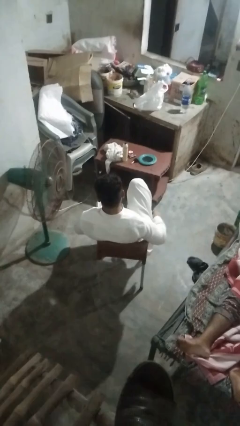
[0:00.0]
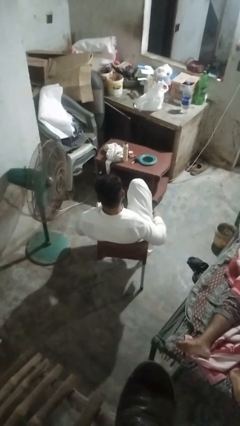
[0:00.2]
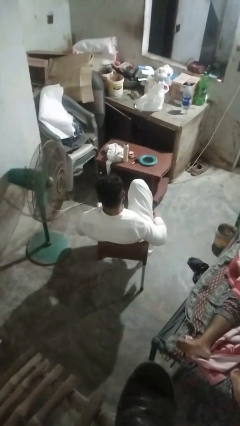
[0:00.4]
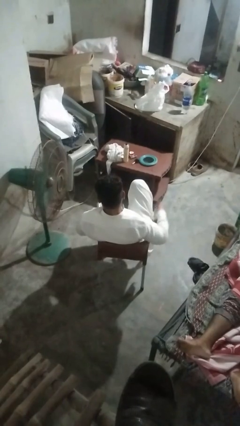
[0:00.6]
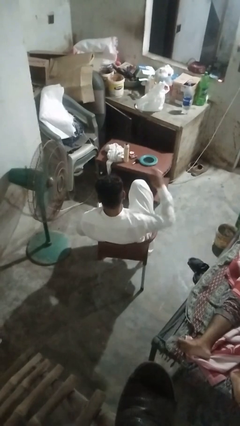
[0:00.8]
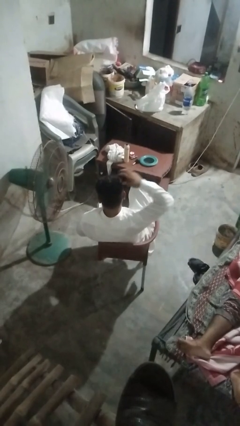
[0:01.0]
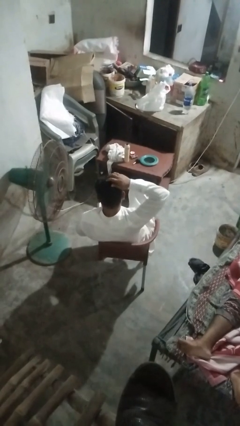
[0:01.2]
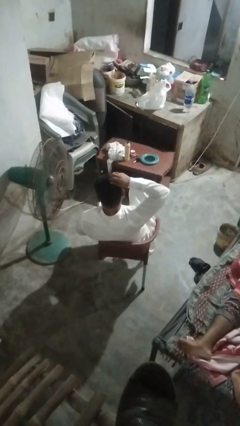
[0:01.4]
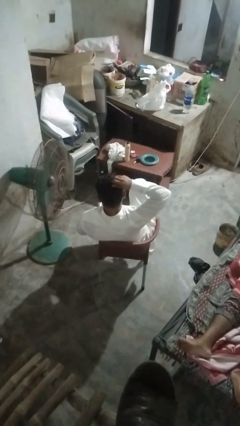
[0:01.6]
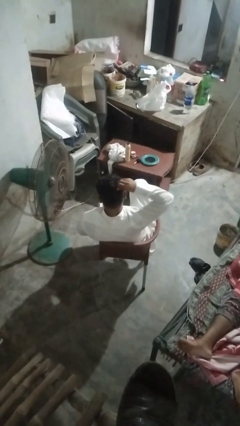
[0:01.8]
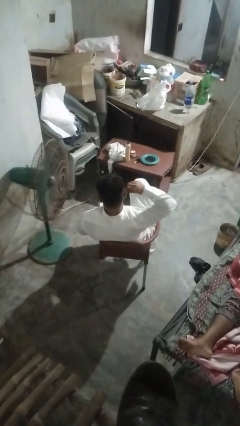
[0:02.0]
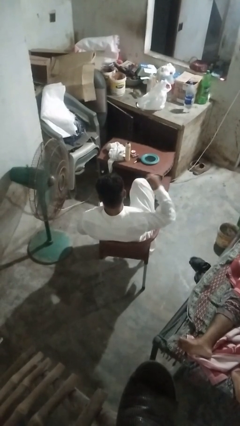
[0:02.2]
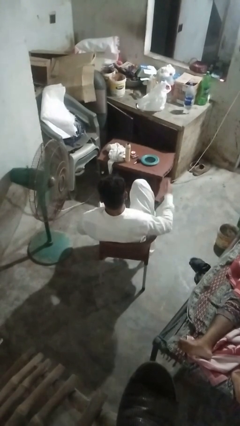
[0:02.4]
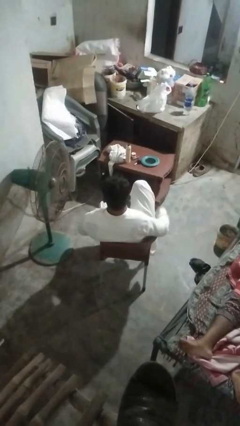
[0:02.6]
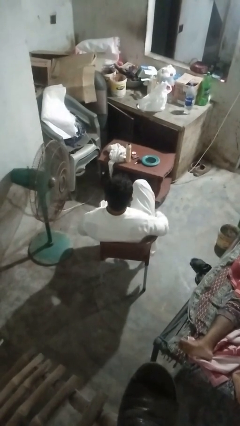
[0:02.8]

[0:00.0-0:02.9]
person takes off hairtie

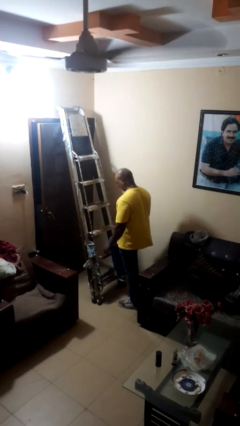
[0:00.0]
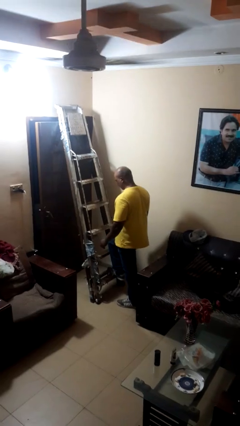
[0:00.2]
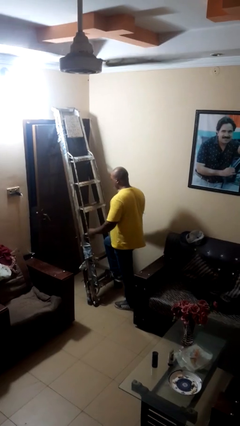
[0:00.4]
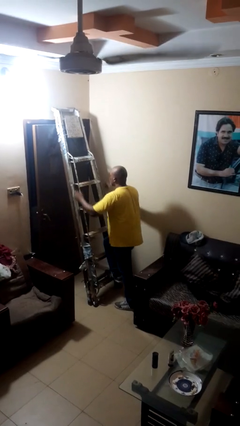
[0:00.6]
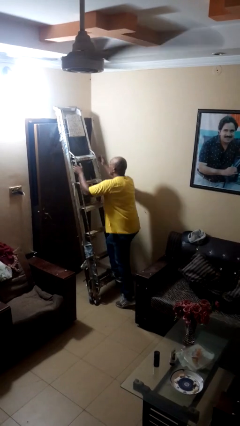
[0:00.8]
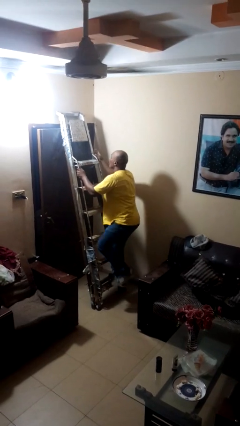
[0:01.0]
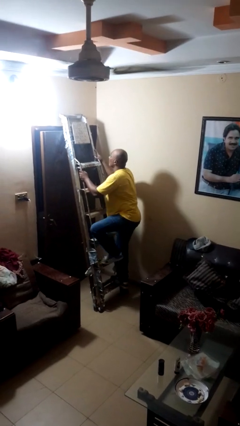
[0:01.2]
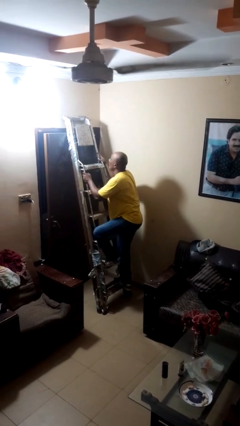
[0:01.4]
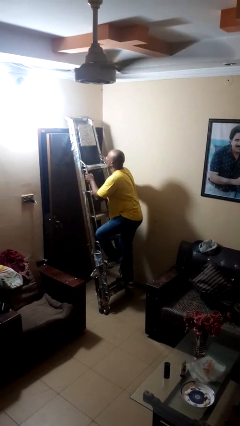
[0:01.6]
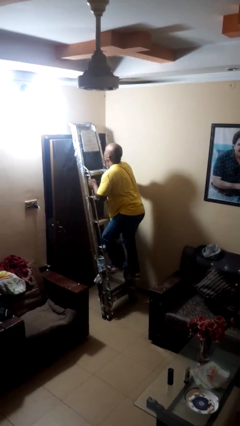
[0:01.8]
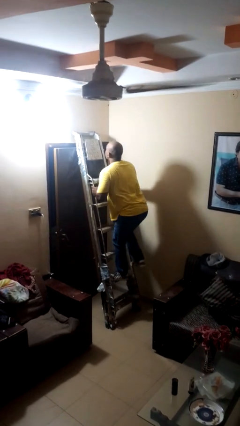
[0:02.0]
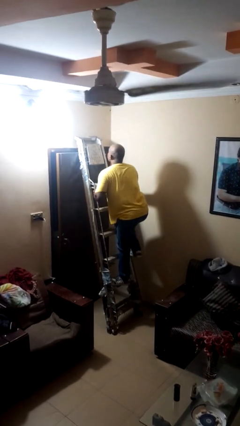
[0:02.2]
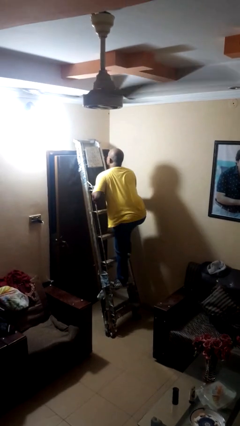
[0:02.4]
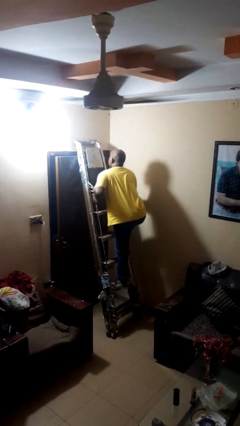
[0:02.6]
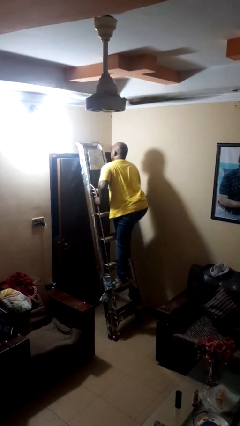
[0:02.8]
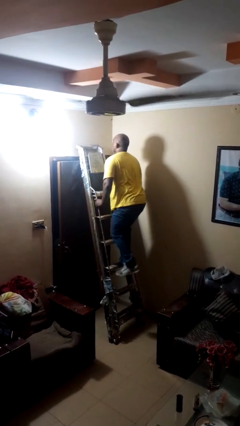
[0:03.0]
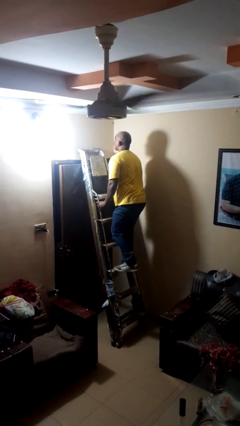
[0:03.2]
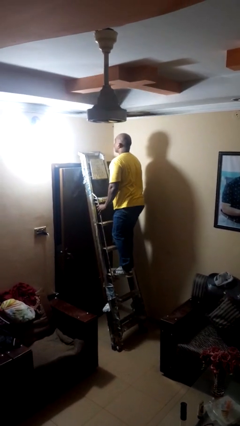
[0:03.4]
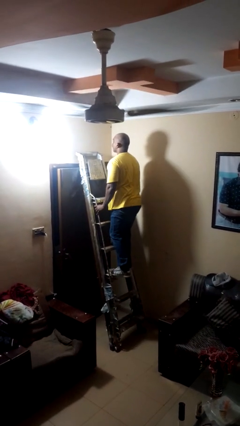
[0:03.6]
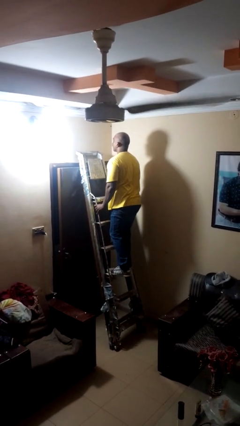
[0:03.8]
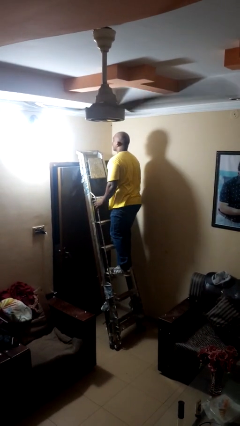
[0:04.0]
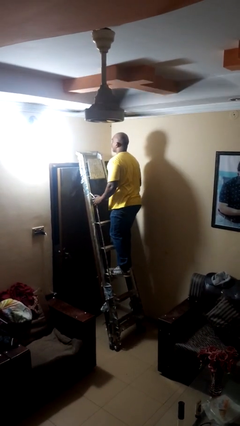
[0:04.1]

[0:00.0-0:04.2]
person climbs up stairs

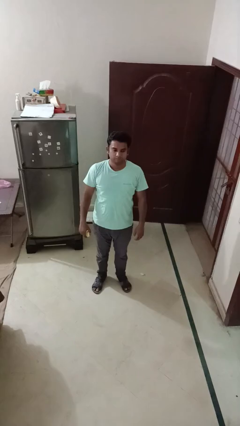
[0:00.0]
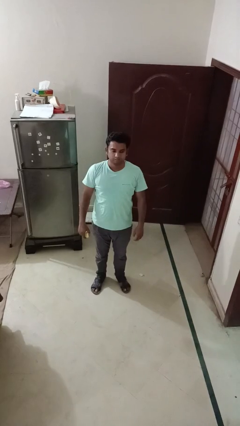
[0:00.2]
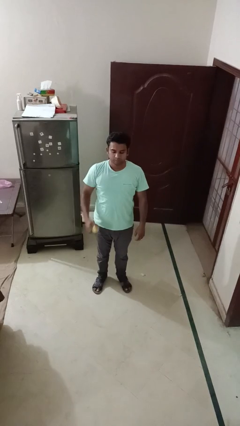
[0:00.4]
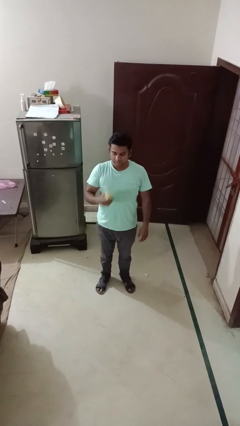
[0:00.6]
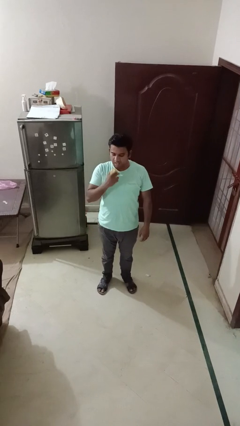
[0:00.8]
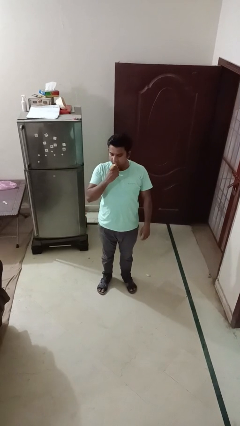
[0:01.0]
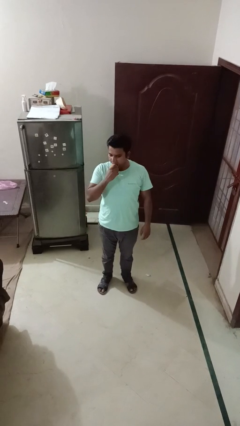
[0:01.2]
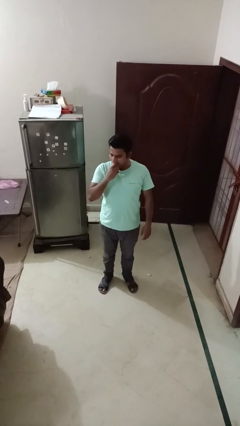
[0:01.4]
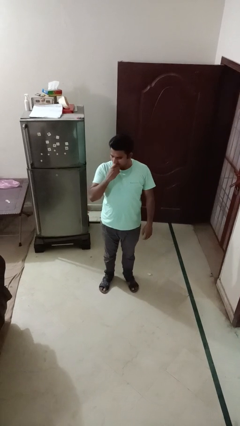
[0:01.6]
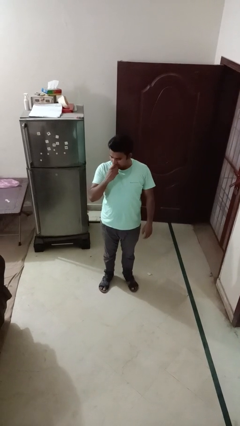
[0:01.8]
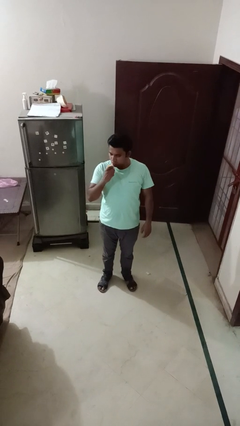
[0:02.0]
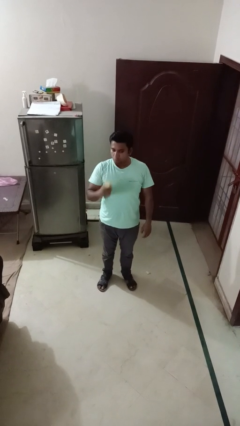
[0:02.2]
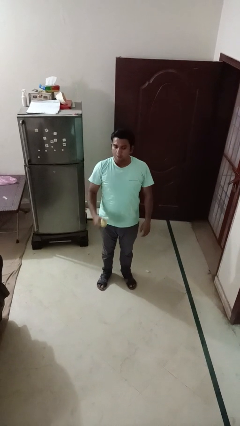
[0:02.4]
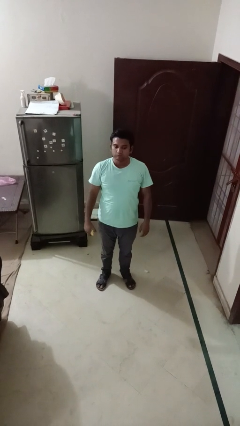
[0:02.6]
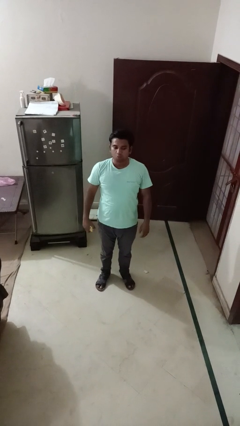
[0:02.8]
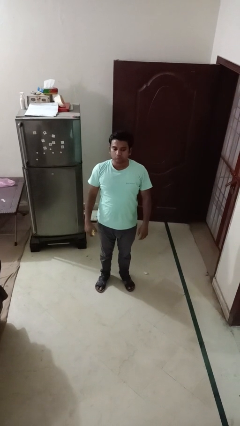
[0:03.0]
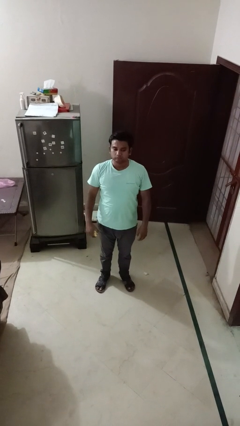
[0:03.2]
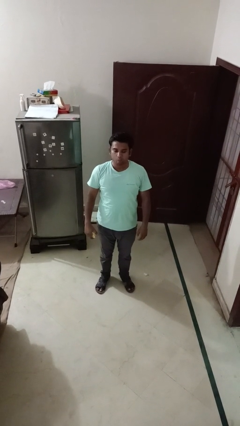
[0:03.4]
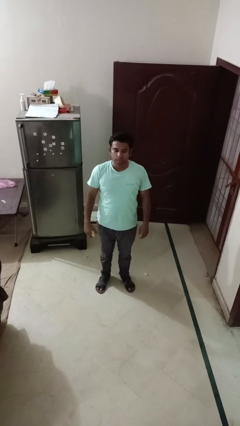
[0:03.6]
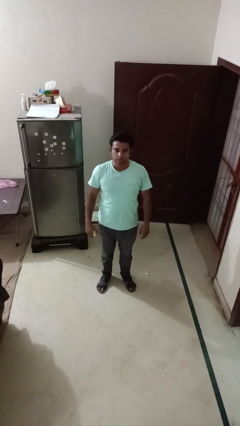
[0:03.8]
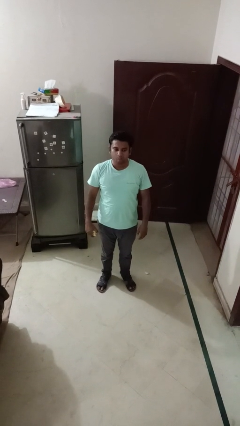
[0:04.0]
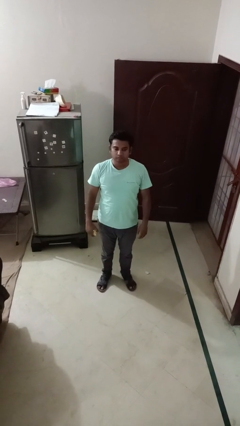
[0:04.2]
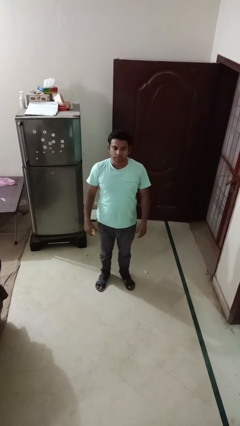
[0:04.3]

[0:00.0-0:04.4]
person eats apple

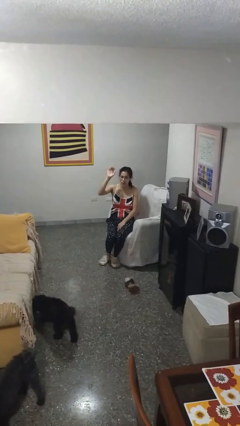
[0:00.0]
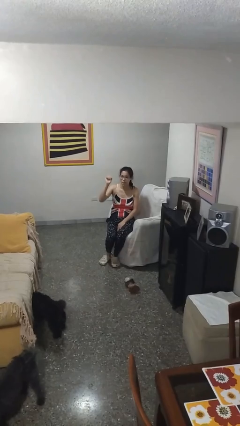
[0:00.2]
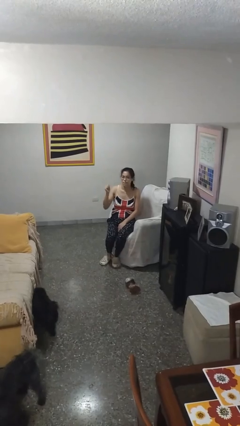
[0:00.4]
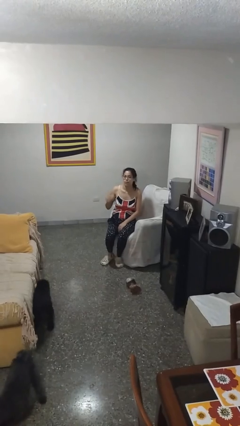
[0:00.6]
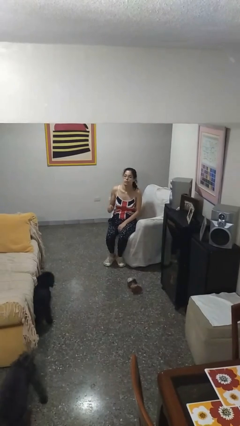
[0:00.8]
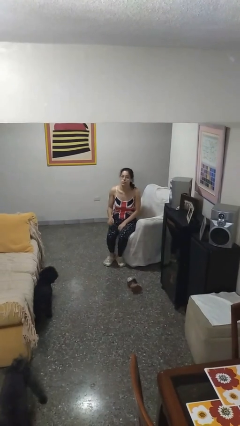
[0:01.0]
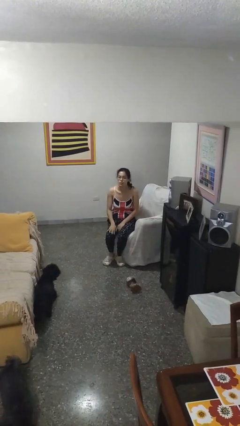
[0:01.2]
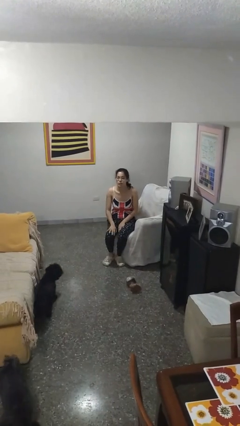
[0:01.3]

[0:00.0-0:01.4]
person gestures lower hand

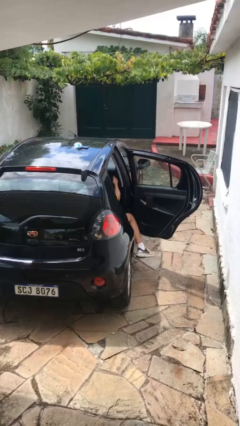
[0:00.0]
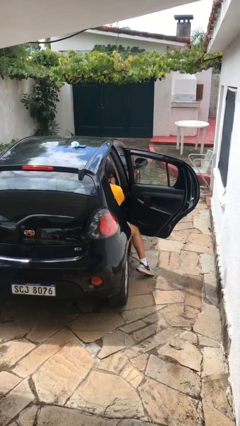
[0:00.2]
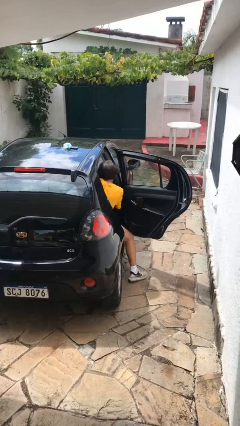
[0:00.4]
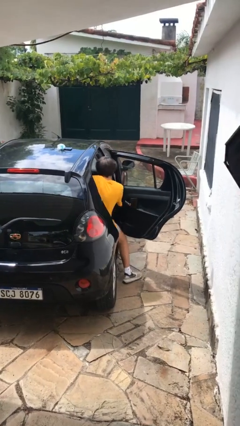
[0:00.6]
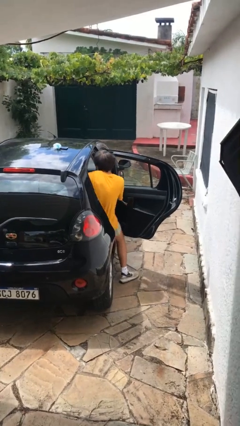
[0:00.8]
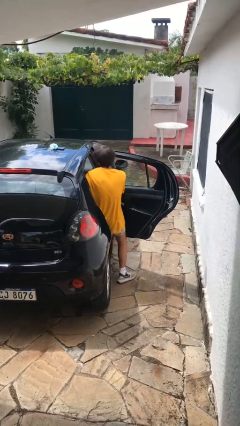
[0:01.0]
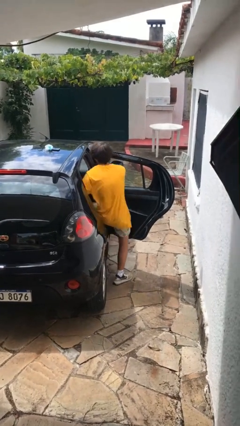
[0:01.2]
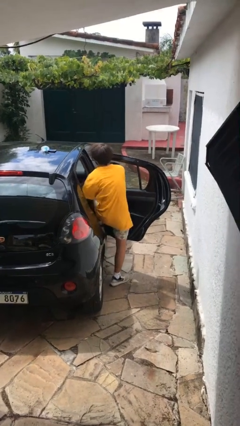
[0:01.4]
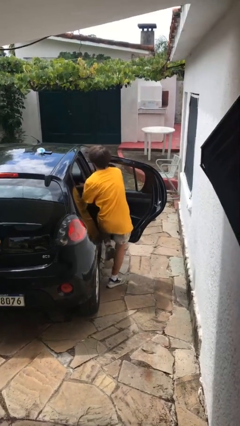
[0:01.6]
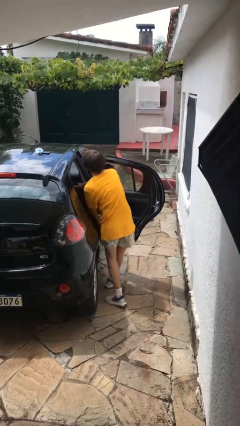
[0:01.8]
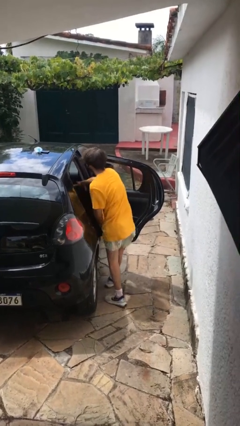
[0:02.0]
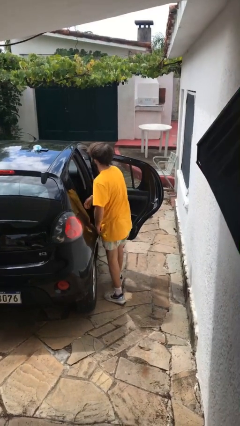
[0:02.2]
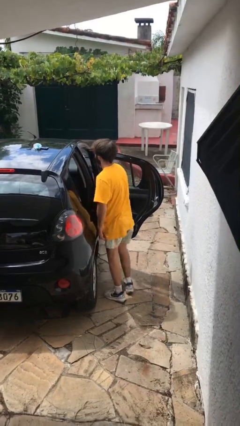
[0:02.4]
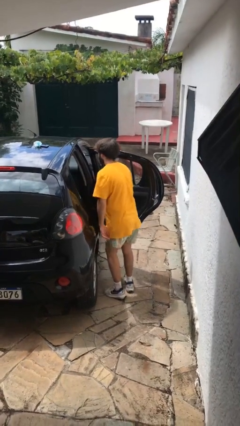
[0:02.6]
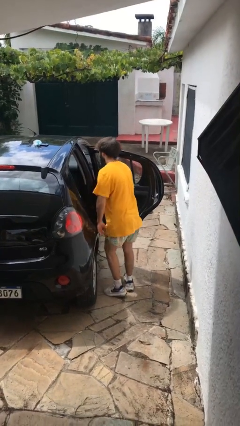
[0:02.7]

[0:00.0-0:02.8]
person exits car

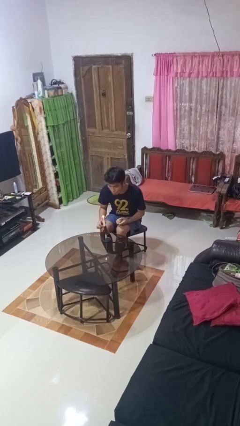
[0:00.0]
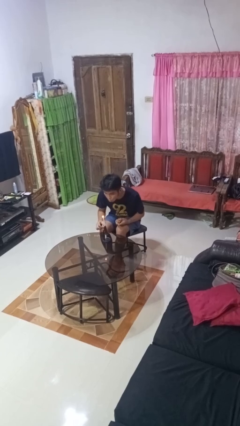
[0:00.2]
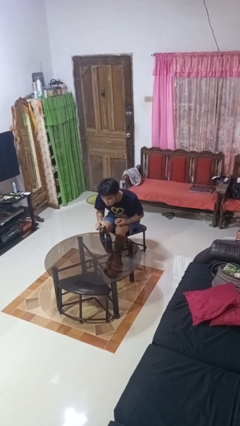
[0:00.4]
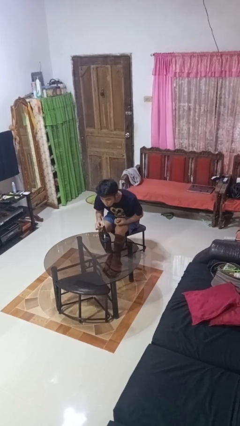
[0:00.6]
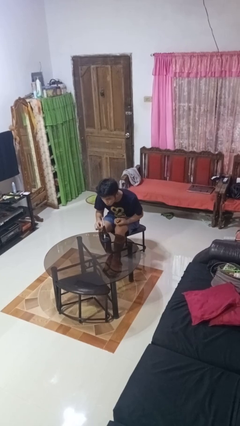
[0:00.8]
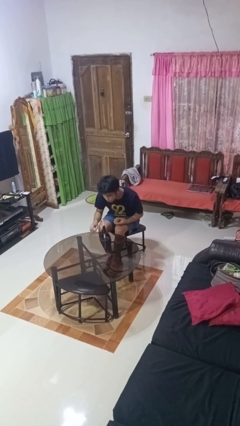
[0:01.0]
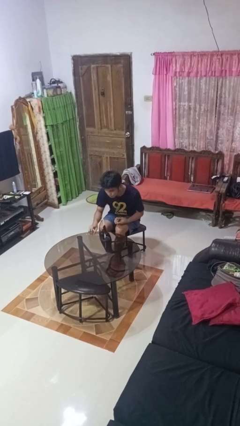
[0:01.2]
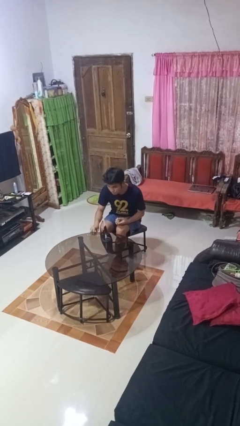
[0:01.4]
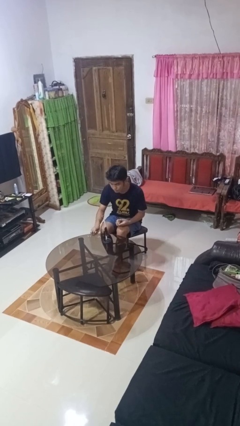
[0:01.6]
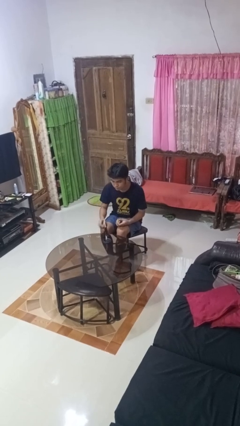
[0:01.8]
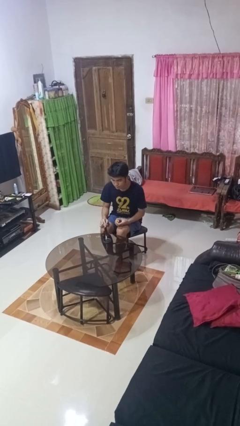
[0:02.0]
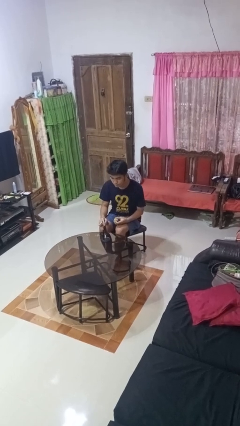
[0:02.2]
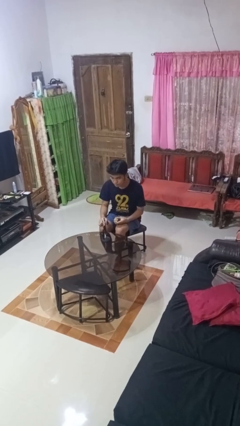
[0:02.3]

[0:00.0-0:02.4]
person extinguishes candle
